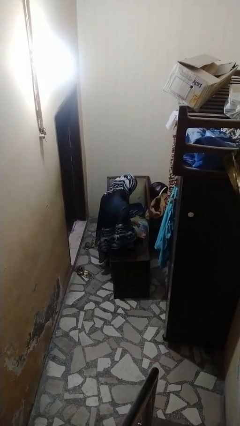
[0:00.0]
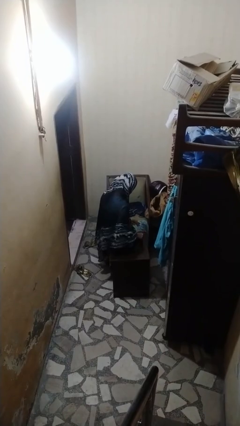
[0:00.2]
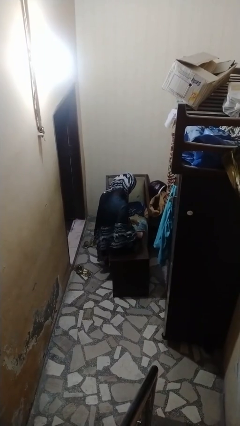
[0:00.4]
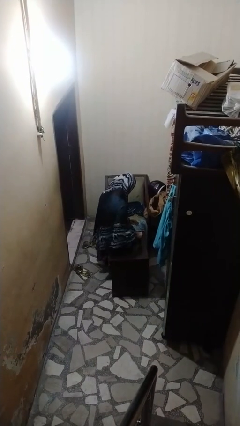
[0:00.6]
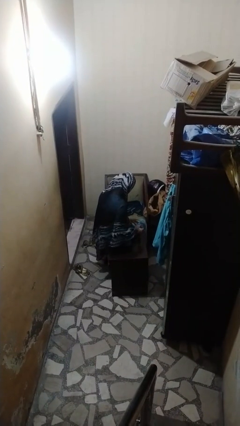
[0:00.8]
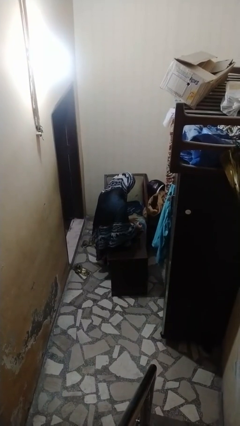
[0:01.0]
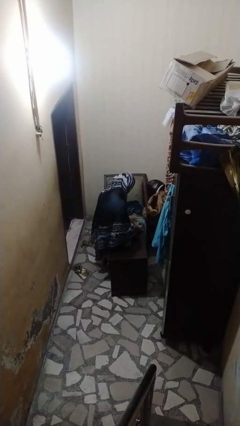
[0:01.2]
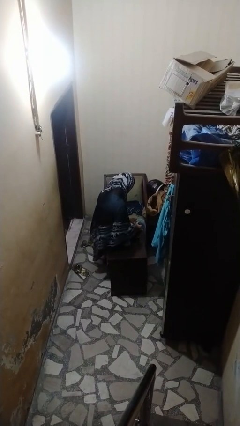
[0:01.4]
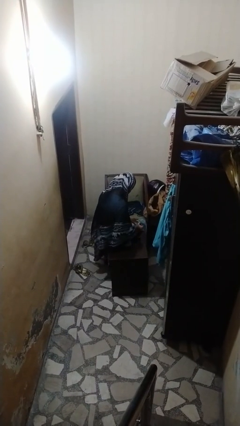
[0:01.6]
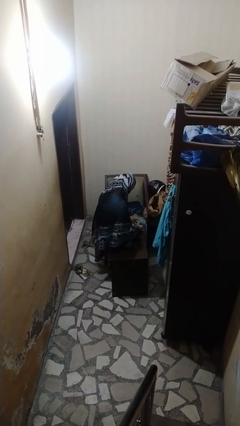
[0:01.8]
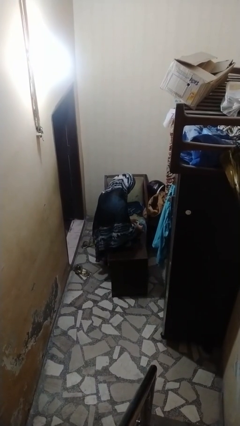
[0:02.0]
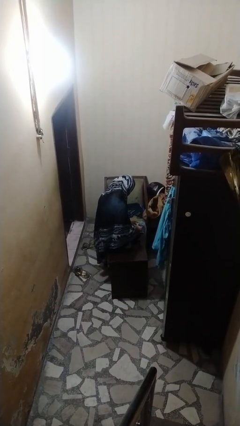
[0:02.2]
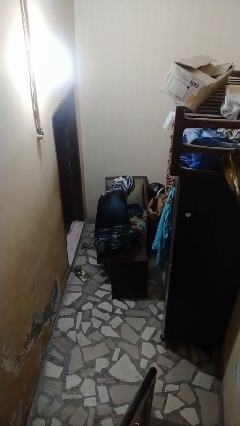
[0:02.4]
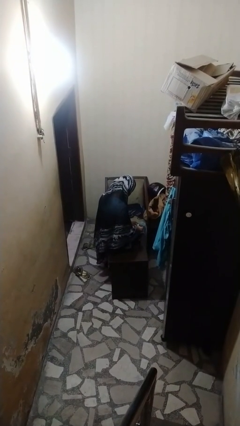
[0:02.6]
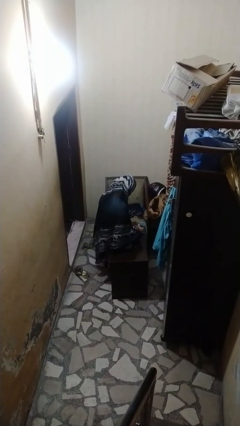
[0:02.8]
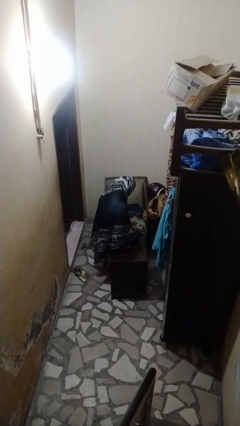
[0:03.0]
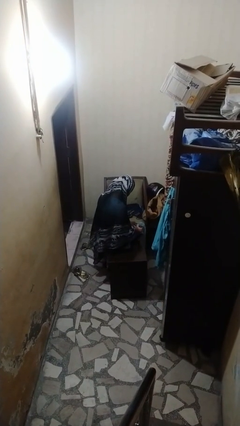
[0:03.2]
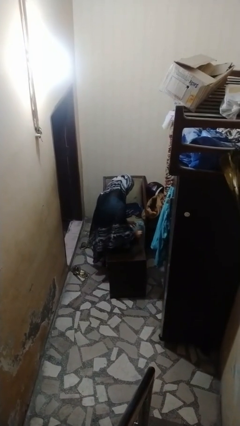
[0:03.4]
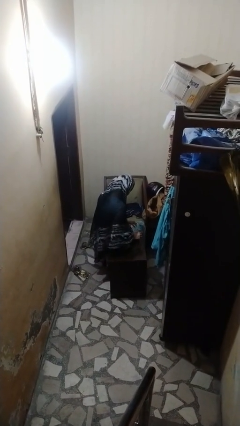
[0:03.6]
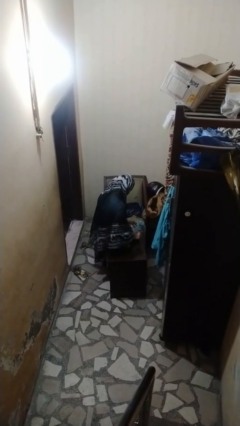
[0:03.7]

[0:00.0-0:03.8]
person paints fingernails

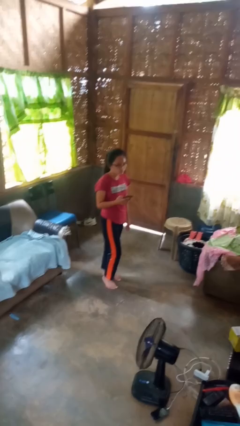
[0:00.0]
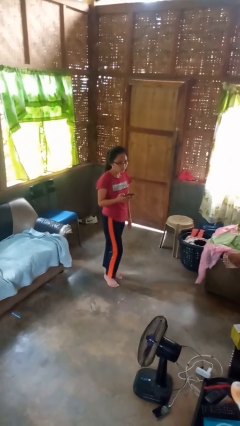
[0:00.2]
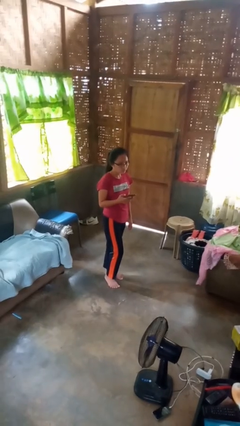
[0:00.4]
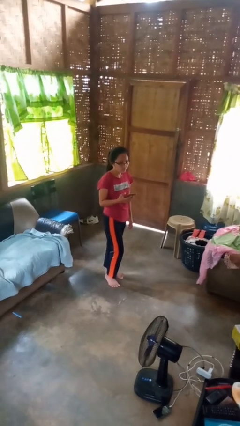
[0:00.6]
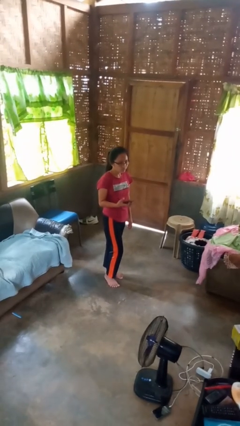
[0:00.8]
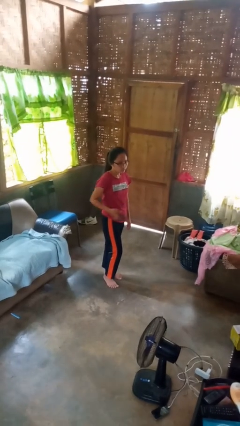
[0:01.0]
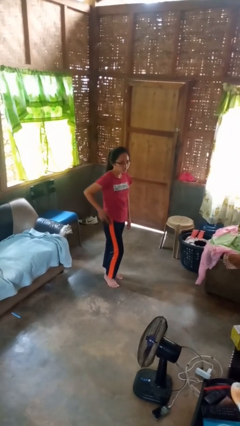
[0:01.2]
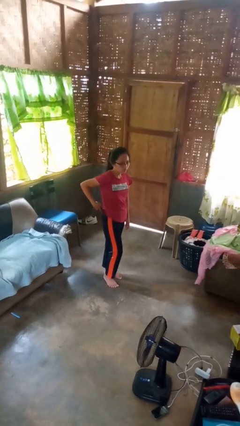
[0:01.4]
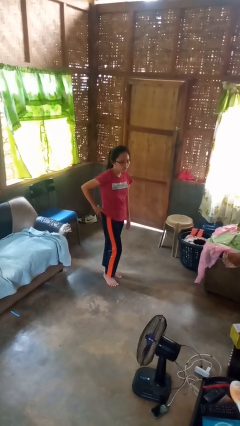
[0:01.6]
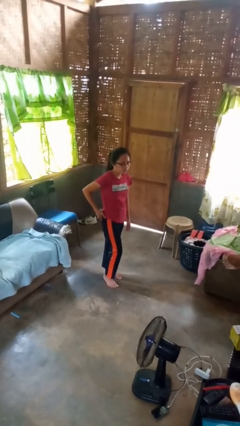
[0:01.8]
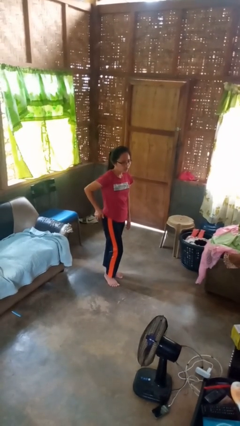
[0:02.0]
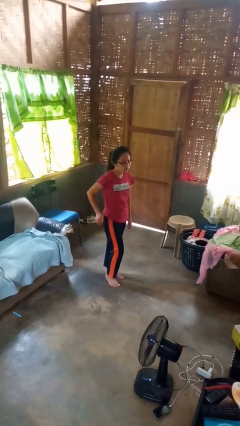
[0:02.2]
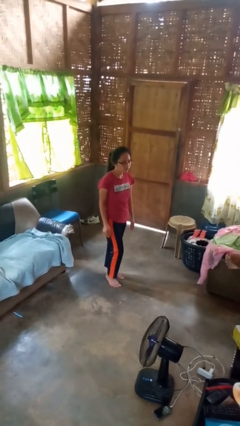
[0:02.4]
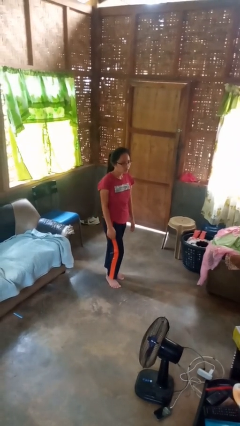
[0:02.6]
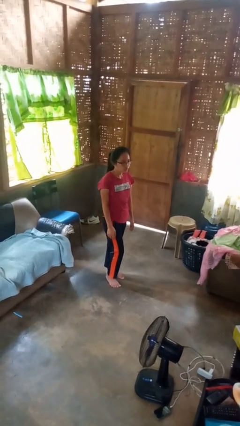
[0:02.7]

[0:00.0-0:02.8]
person puts phone into pocket

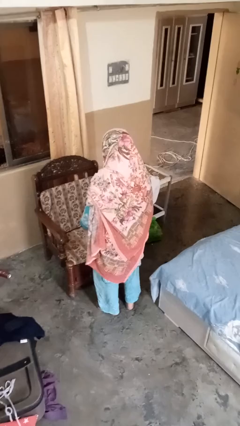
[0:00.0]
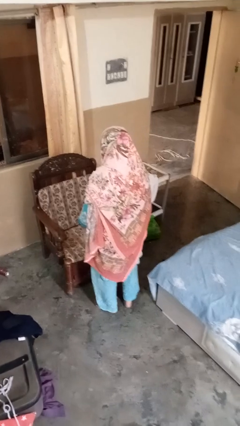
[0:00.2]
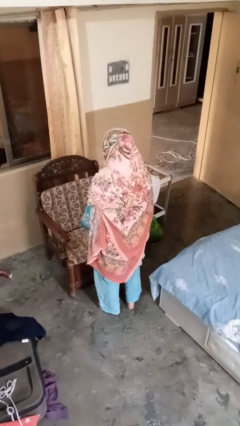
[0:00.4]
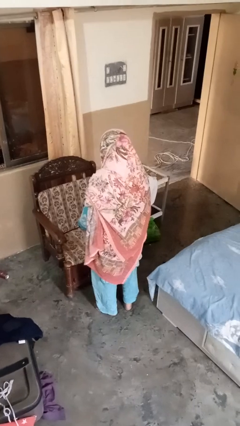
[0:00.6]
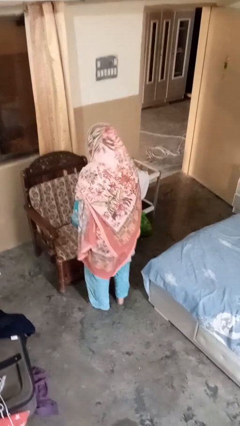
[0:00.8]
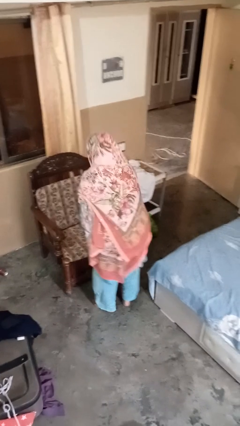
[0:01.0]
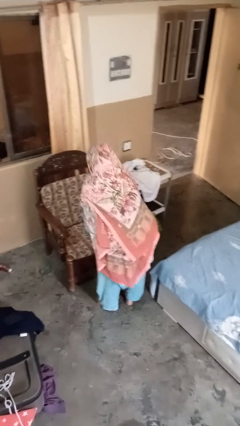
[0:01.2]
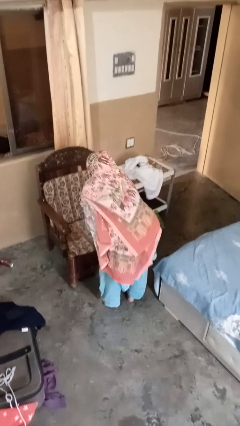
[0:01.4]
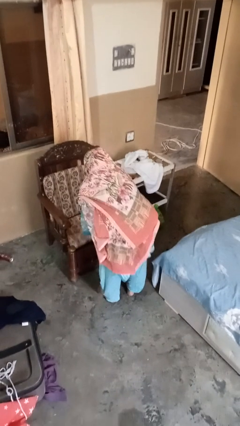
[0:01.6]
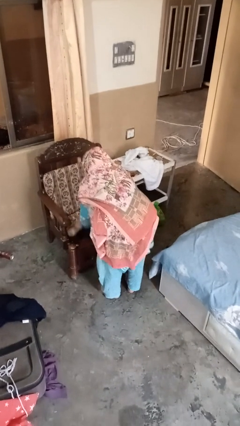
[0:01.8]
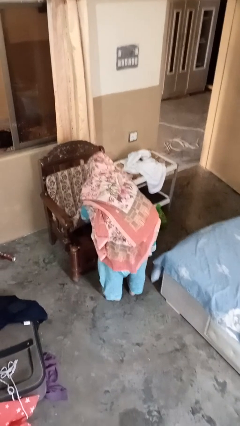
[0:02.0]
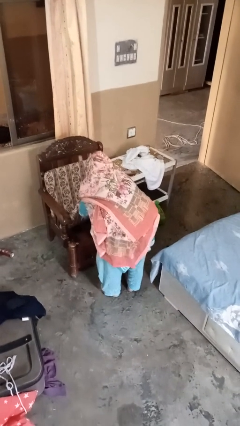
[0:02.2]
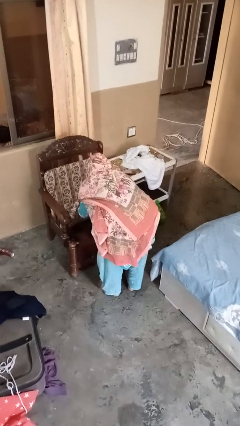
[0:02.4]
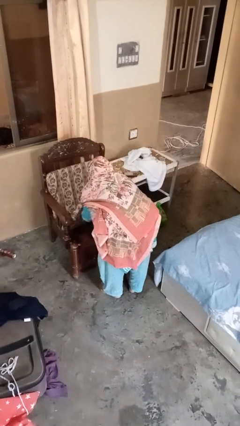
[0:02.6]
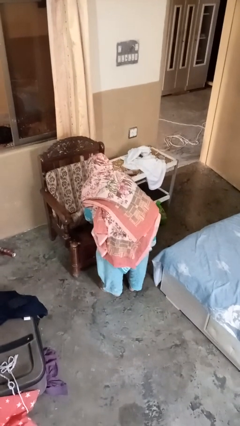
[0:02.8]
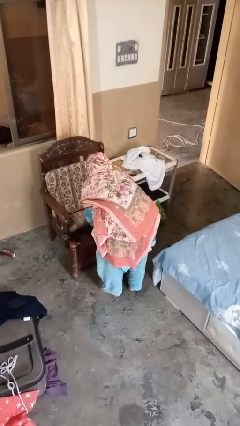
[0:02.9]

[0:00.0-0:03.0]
person searches under couch

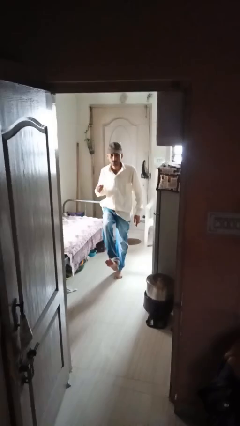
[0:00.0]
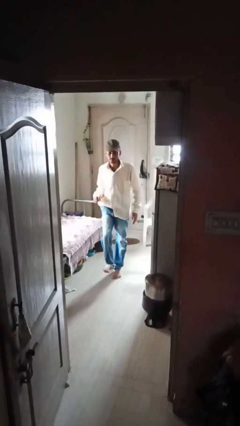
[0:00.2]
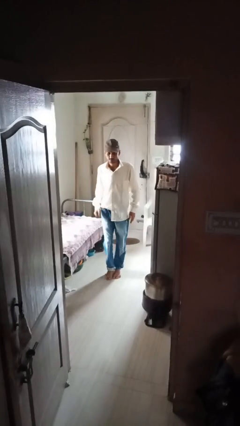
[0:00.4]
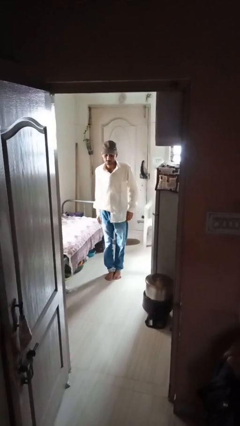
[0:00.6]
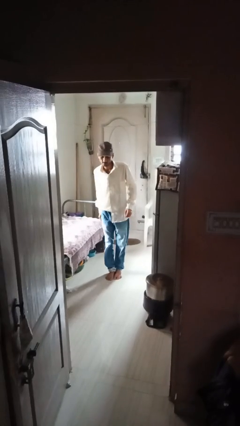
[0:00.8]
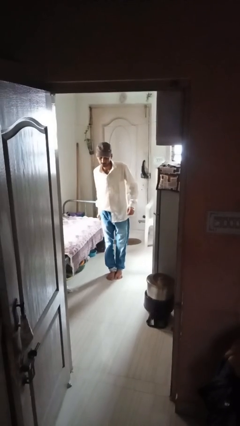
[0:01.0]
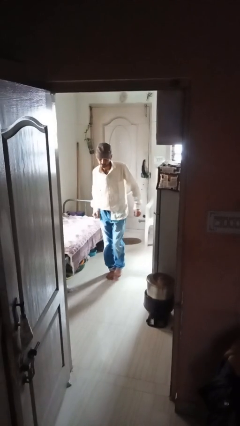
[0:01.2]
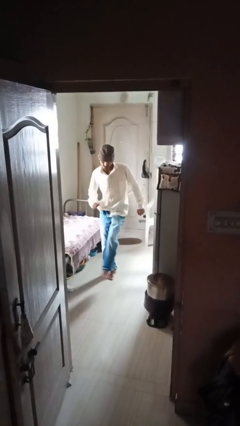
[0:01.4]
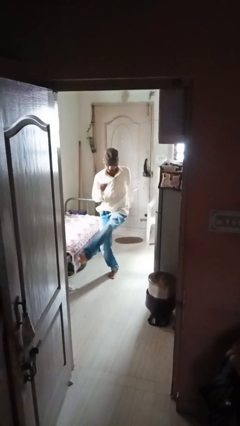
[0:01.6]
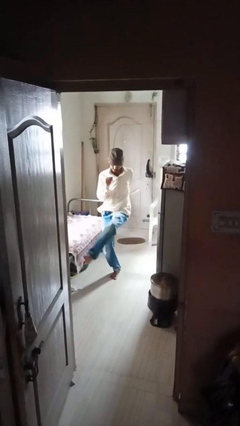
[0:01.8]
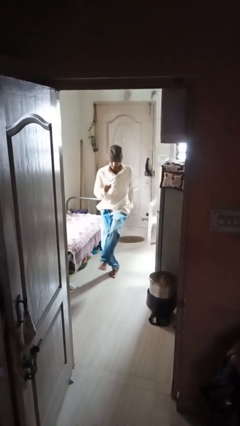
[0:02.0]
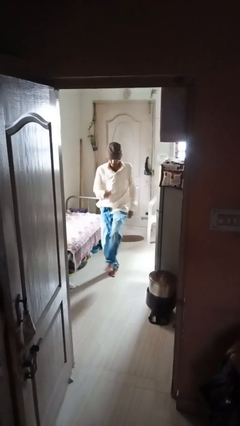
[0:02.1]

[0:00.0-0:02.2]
person dances in place

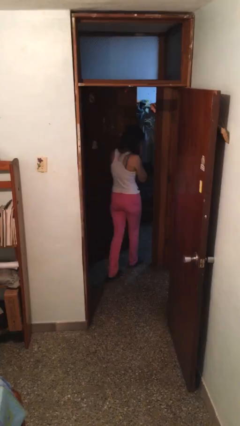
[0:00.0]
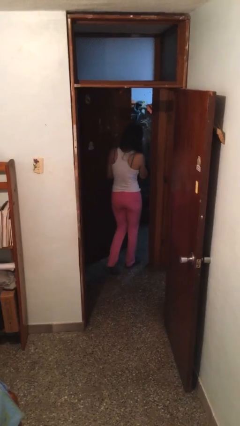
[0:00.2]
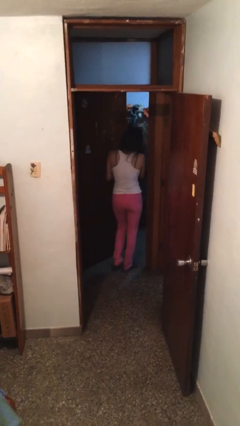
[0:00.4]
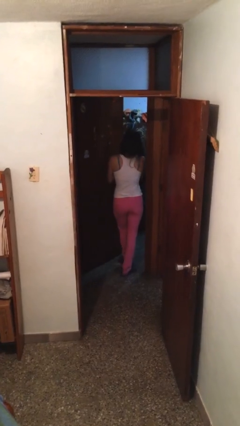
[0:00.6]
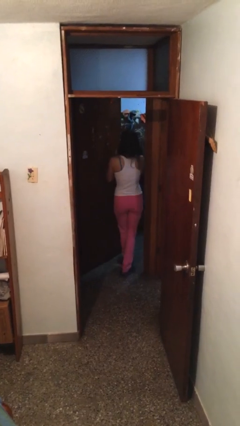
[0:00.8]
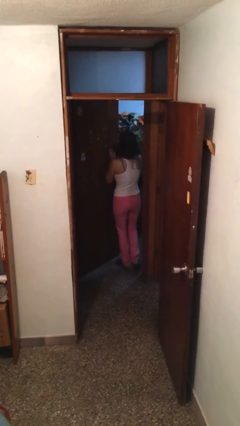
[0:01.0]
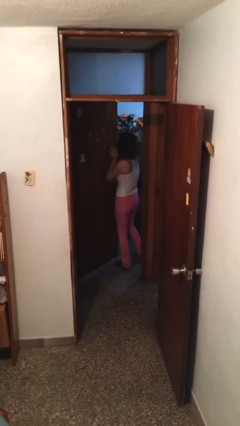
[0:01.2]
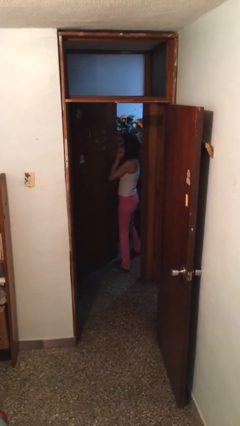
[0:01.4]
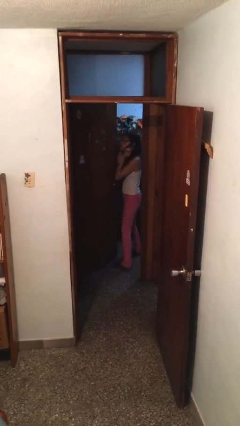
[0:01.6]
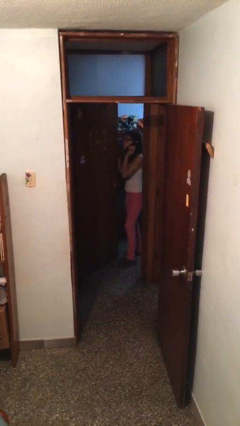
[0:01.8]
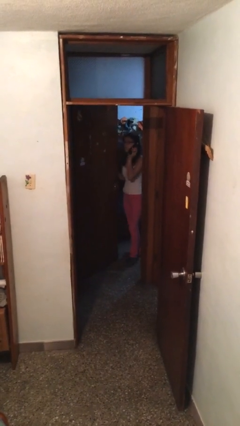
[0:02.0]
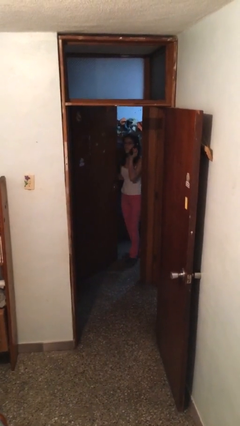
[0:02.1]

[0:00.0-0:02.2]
person exits scene through structure

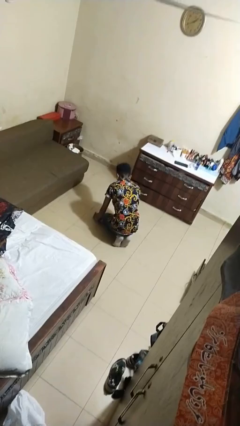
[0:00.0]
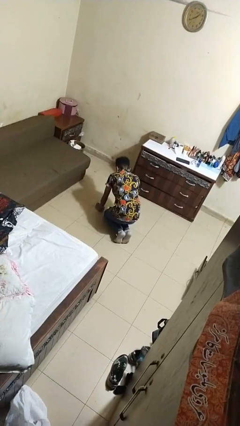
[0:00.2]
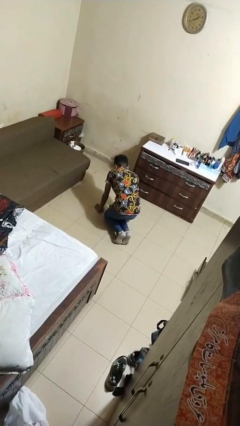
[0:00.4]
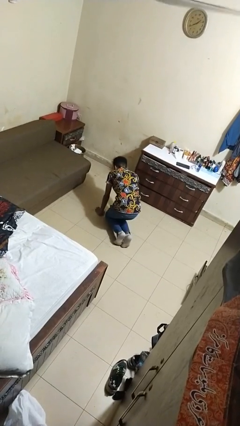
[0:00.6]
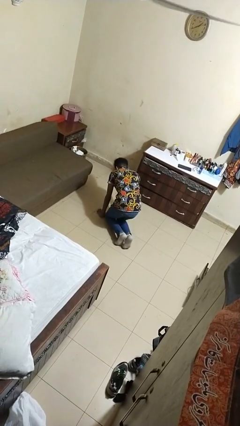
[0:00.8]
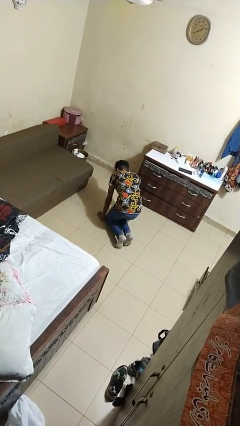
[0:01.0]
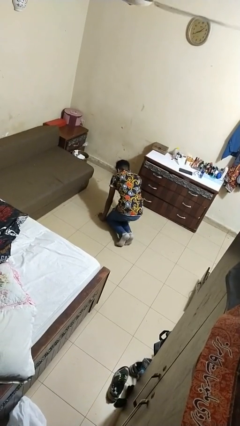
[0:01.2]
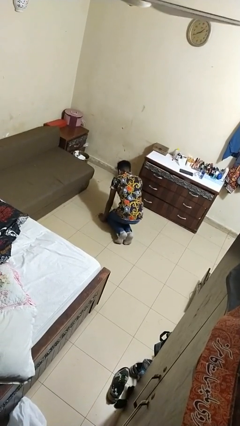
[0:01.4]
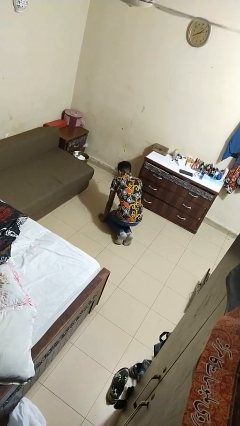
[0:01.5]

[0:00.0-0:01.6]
person crawls

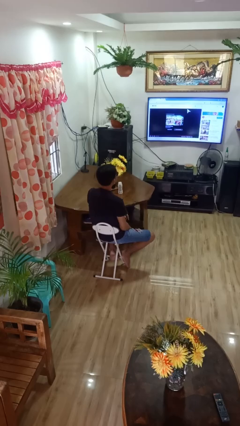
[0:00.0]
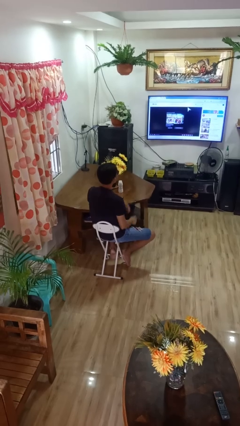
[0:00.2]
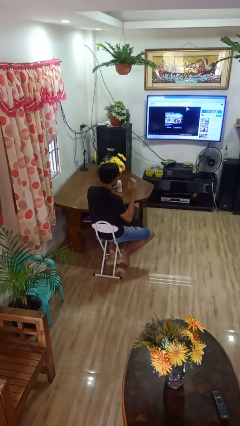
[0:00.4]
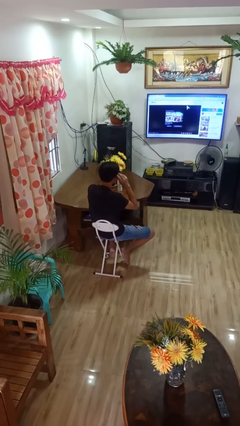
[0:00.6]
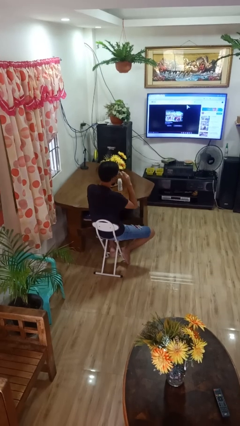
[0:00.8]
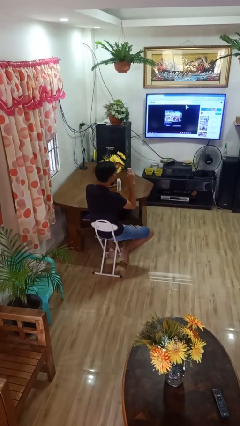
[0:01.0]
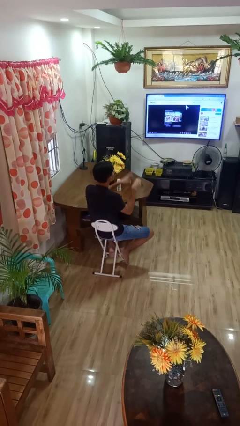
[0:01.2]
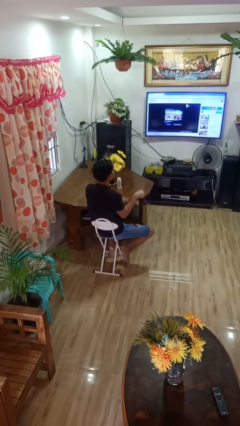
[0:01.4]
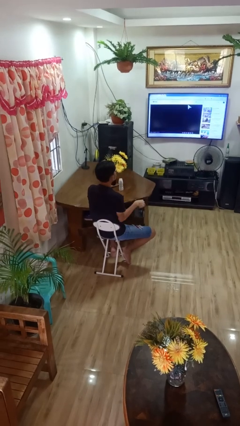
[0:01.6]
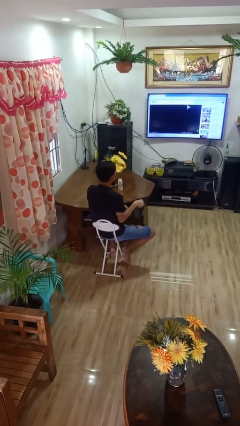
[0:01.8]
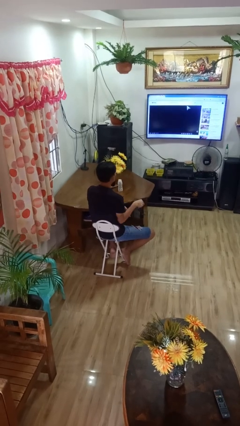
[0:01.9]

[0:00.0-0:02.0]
person takes off sunglasses
